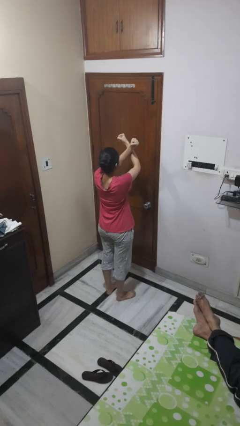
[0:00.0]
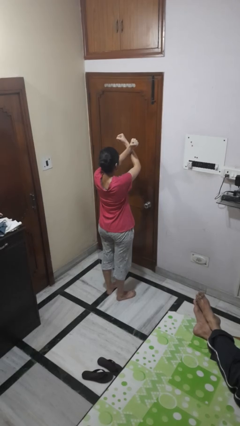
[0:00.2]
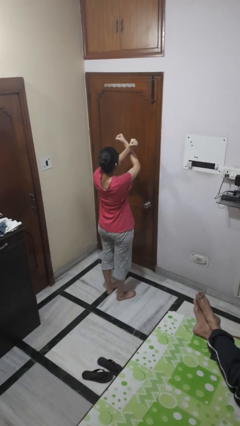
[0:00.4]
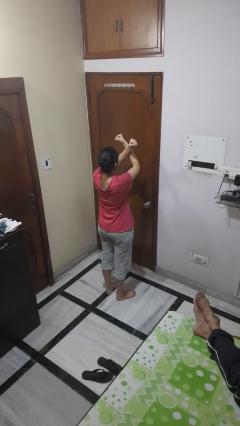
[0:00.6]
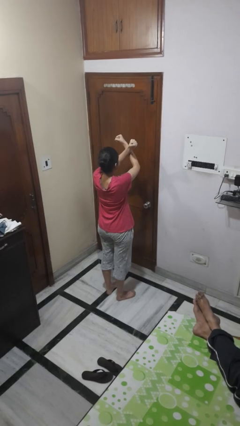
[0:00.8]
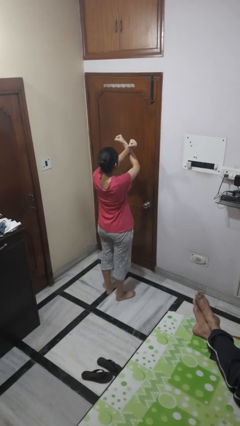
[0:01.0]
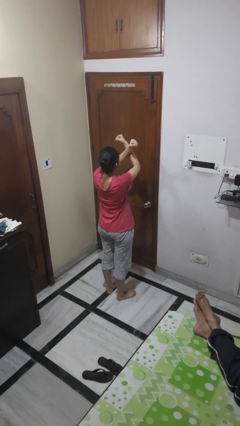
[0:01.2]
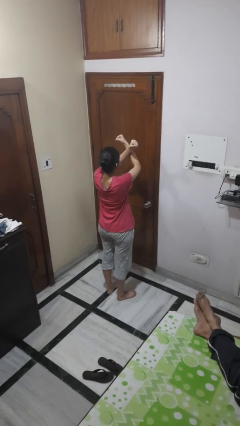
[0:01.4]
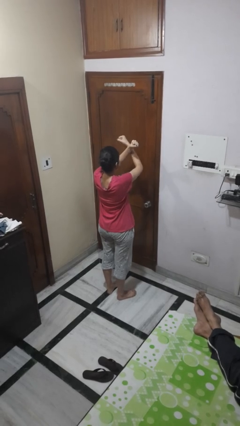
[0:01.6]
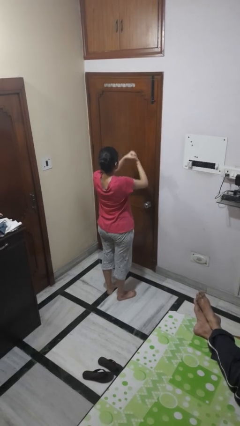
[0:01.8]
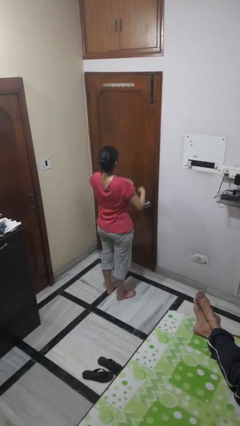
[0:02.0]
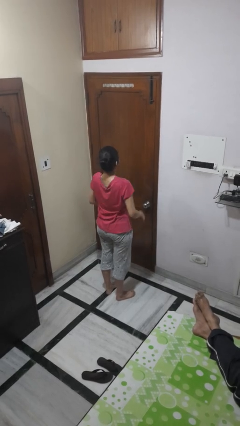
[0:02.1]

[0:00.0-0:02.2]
person gestures arms x

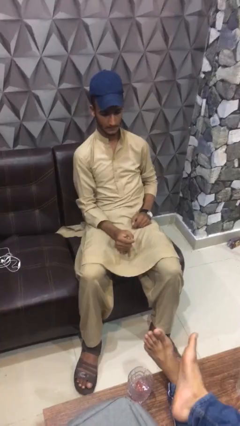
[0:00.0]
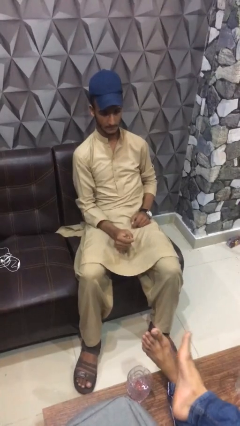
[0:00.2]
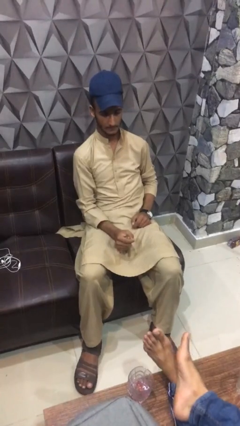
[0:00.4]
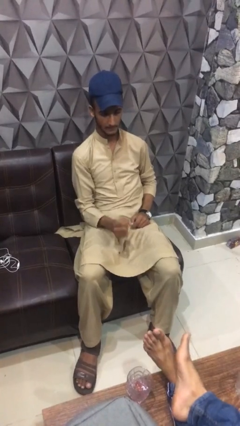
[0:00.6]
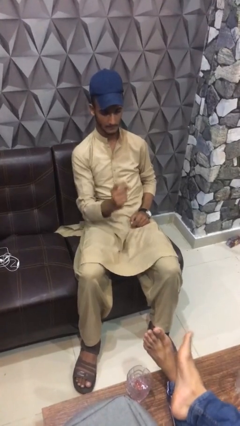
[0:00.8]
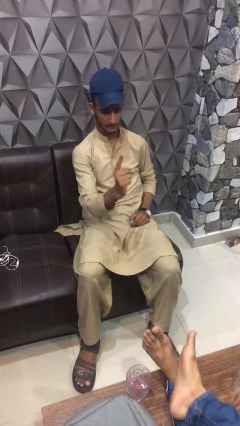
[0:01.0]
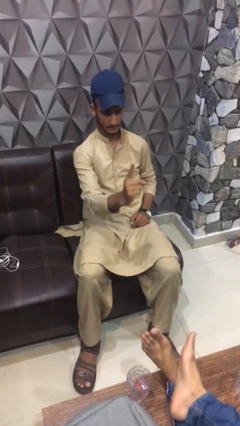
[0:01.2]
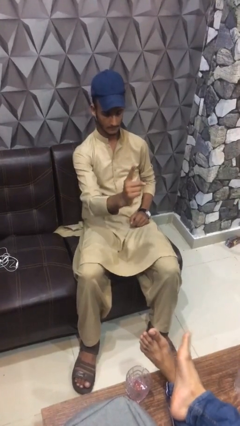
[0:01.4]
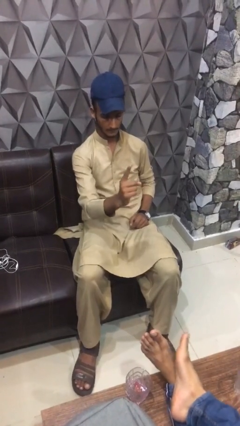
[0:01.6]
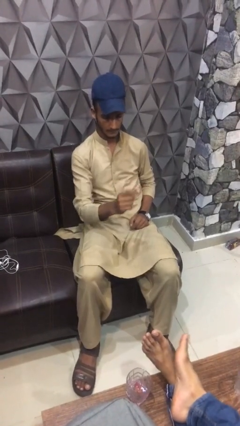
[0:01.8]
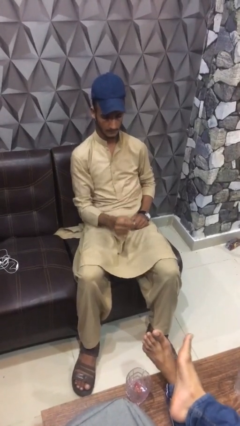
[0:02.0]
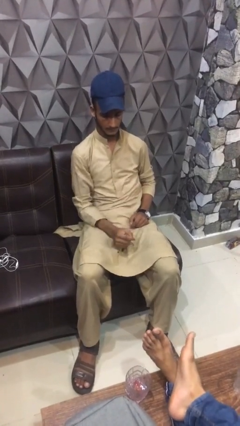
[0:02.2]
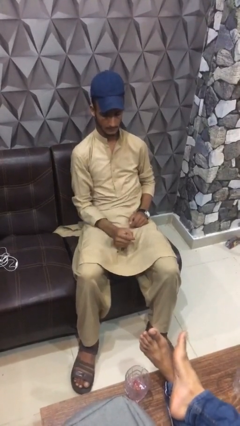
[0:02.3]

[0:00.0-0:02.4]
person gestures number one

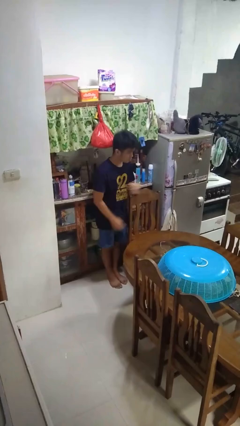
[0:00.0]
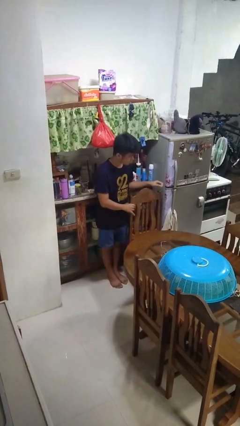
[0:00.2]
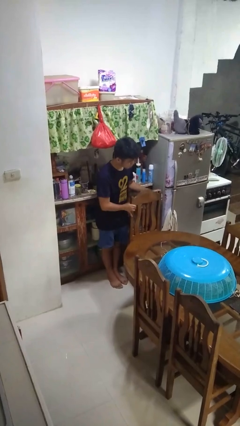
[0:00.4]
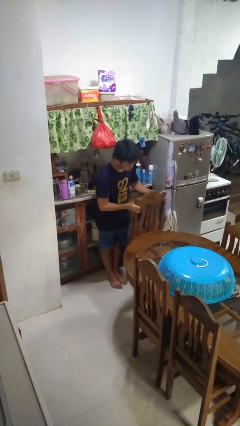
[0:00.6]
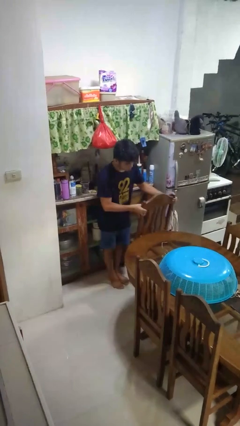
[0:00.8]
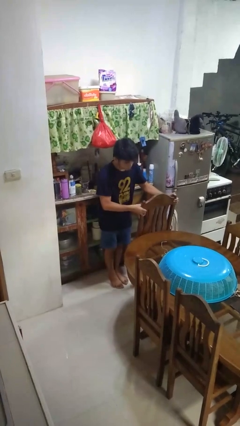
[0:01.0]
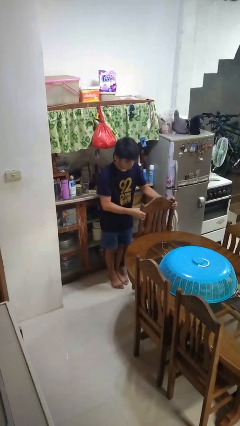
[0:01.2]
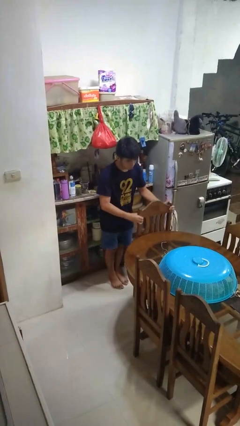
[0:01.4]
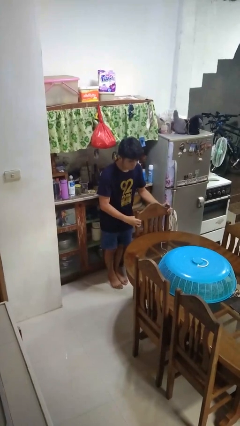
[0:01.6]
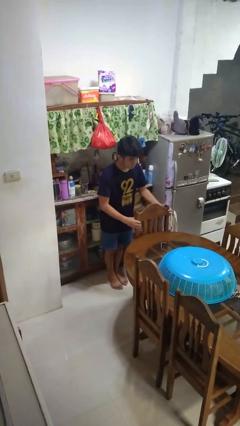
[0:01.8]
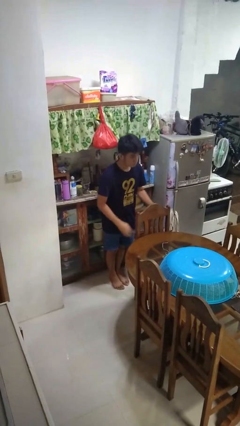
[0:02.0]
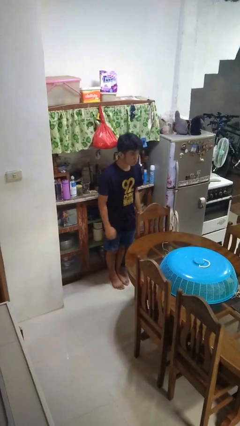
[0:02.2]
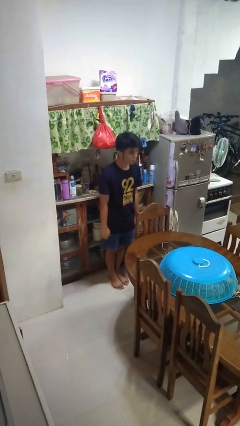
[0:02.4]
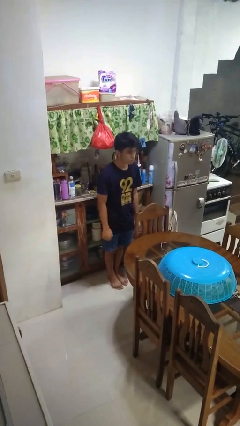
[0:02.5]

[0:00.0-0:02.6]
person pushes in chair

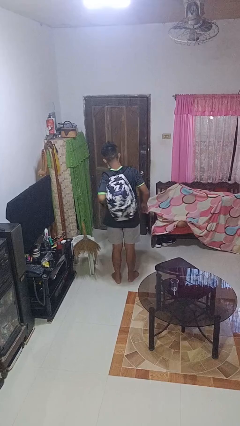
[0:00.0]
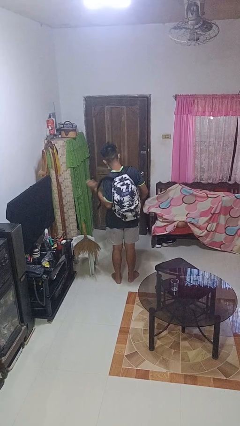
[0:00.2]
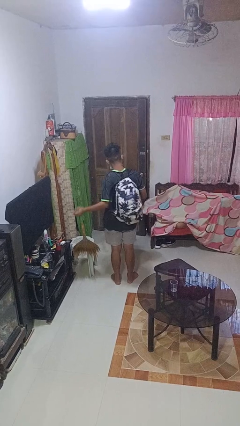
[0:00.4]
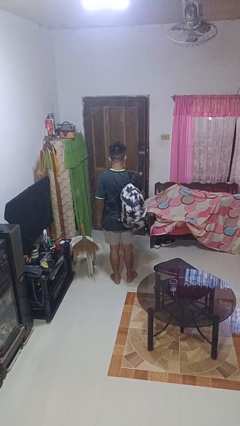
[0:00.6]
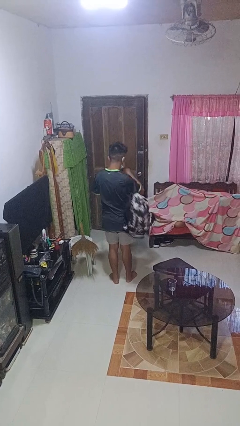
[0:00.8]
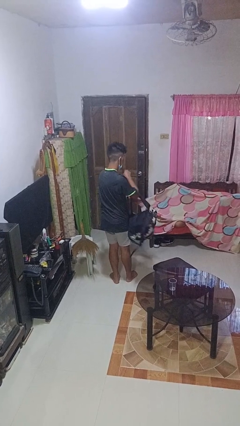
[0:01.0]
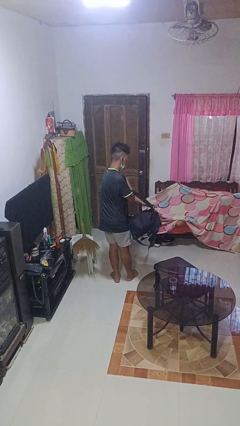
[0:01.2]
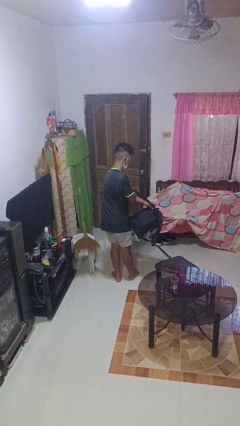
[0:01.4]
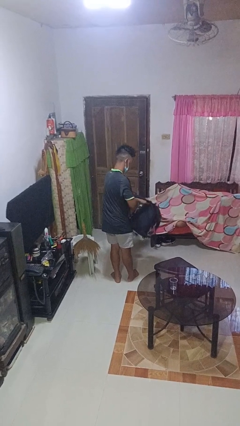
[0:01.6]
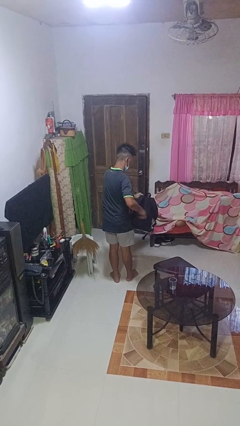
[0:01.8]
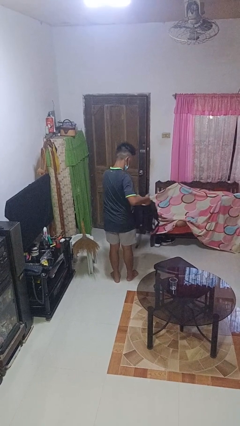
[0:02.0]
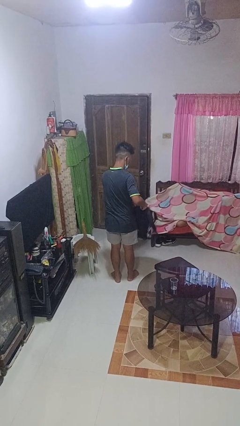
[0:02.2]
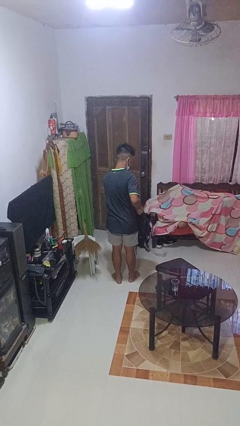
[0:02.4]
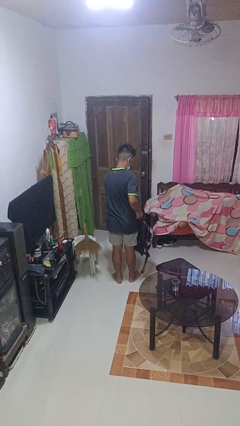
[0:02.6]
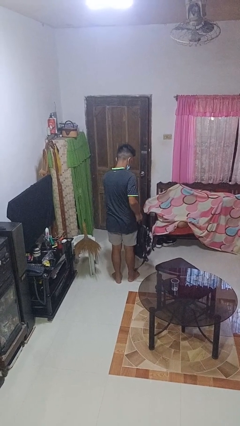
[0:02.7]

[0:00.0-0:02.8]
person takes off backpack

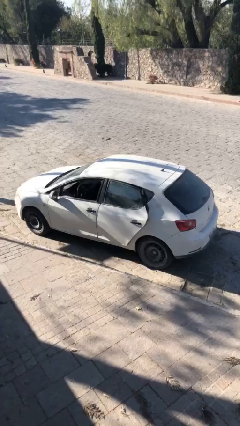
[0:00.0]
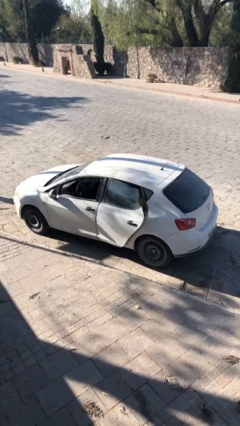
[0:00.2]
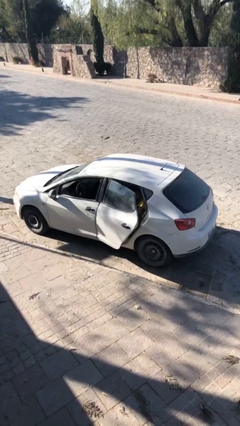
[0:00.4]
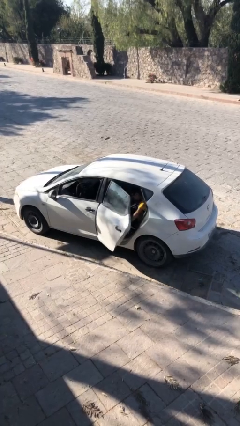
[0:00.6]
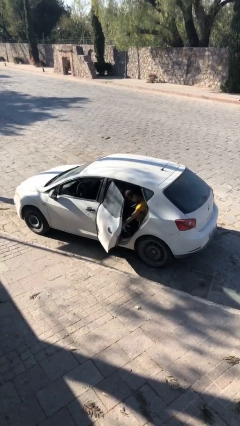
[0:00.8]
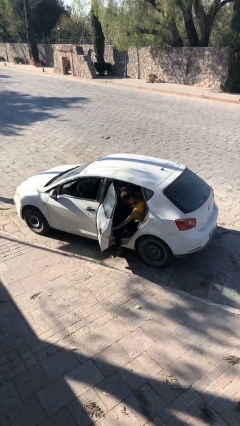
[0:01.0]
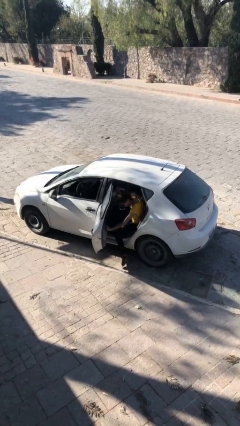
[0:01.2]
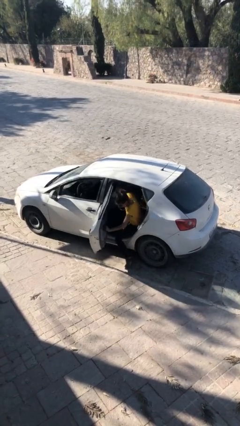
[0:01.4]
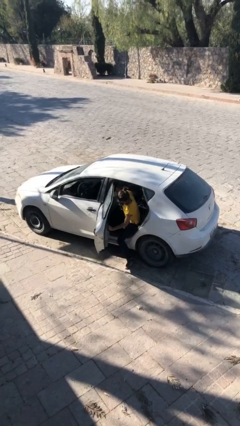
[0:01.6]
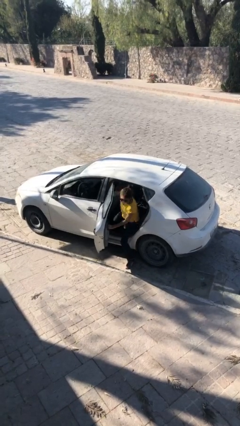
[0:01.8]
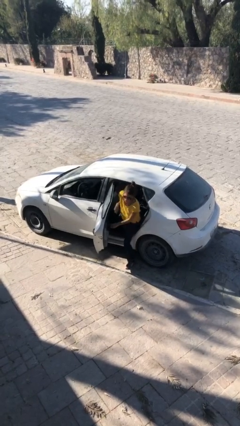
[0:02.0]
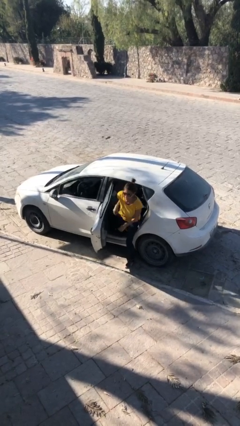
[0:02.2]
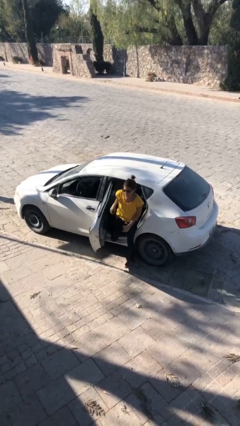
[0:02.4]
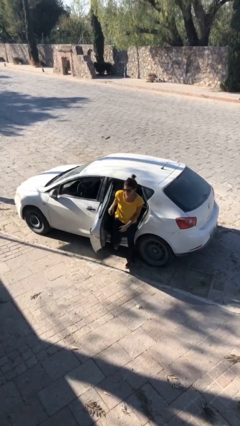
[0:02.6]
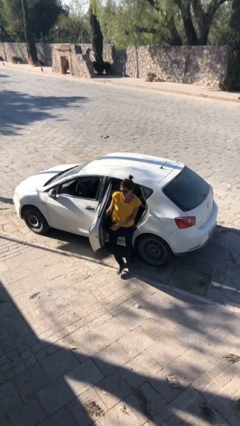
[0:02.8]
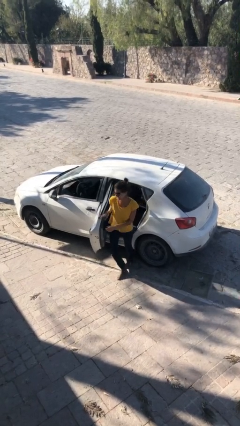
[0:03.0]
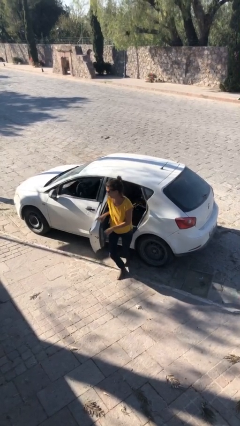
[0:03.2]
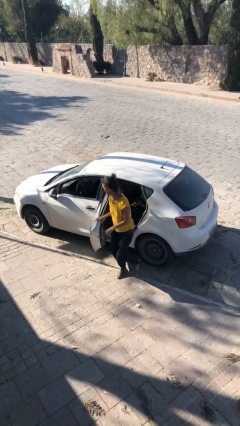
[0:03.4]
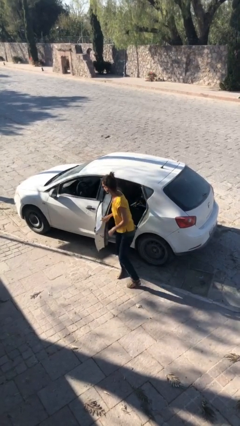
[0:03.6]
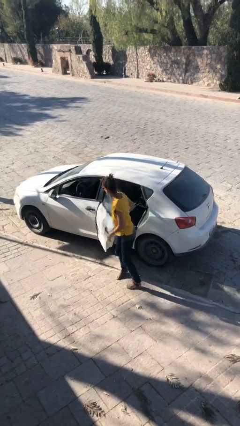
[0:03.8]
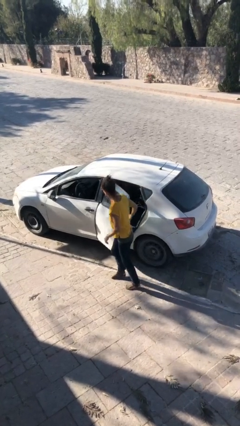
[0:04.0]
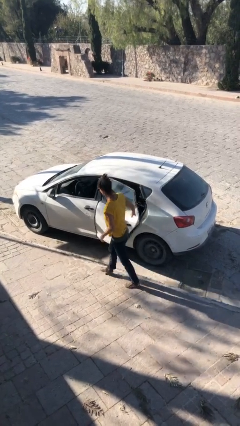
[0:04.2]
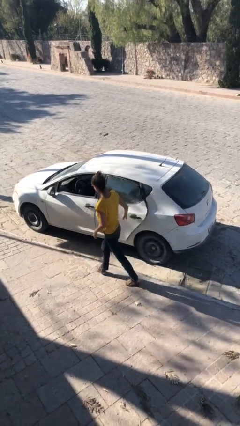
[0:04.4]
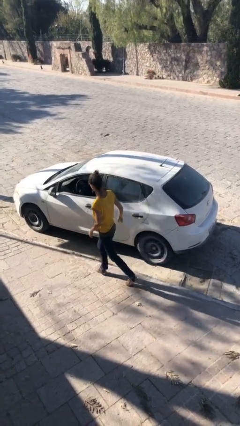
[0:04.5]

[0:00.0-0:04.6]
car drops off person

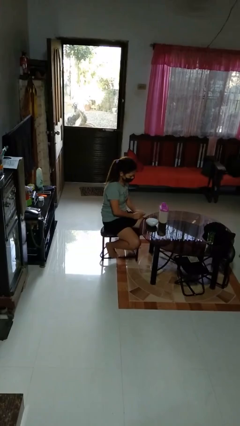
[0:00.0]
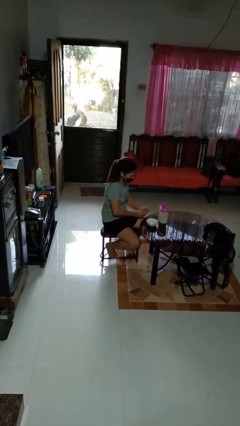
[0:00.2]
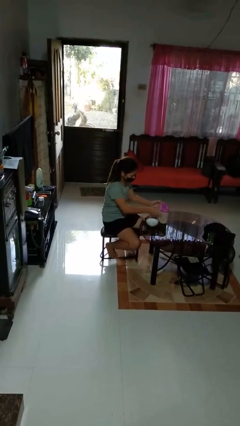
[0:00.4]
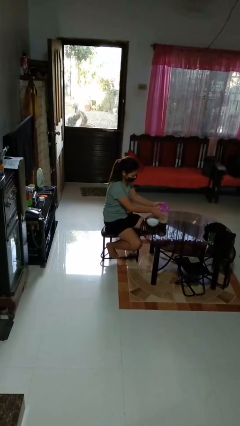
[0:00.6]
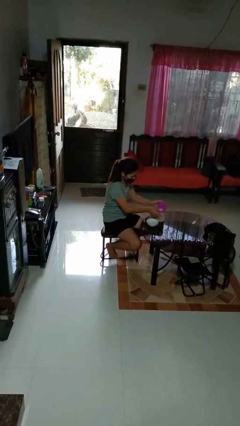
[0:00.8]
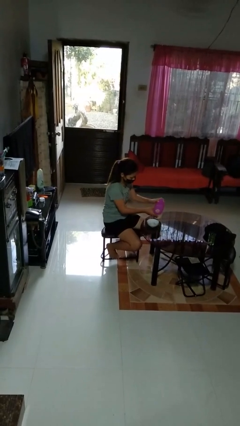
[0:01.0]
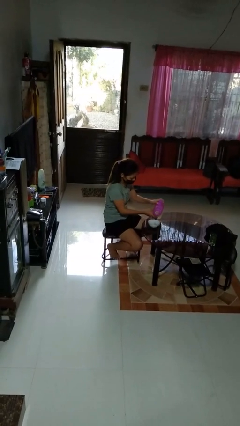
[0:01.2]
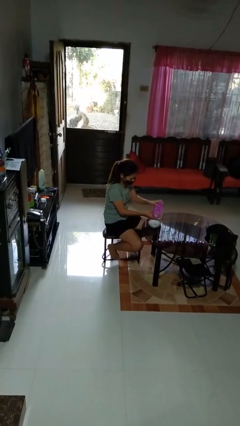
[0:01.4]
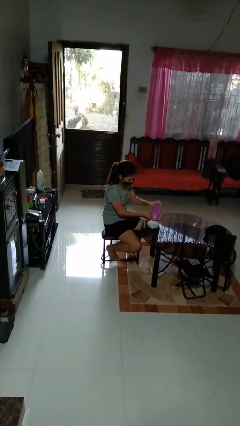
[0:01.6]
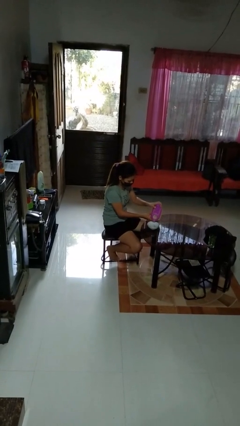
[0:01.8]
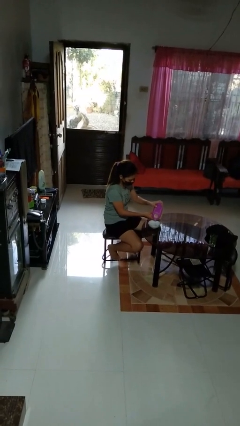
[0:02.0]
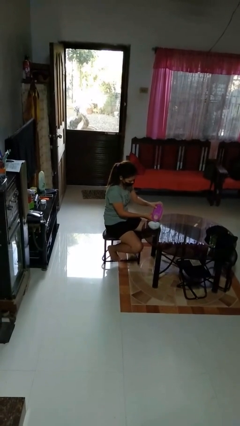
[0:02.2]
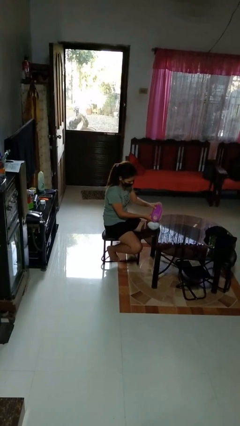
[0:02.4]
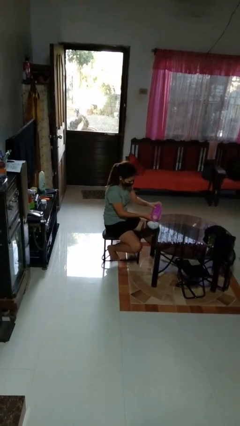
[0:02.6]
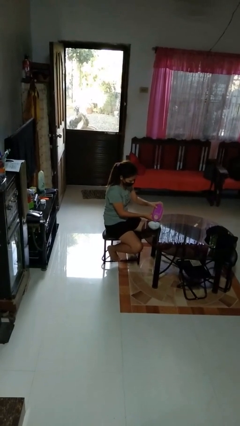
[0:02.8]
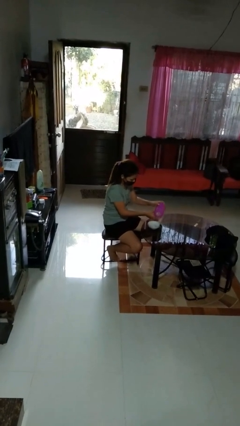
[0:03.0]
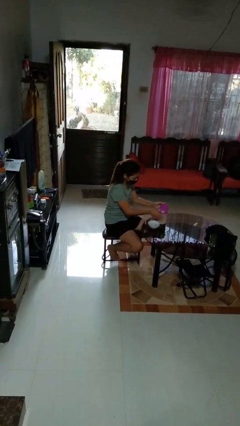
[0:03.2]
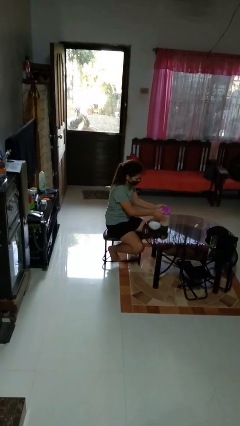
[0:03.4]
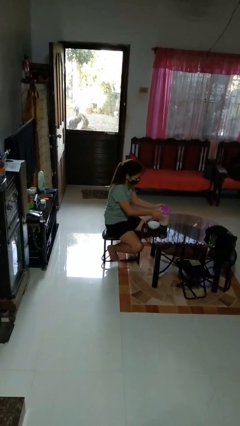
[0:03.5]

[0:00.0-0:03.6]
person pours into bowl
